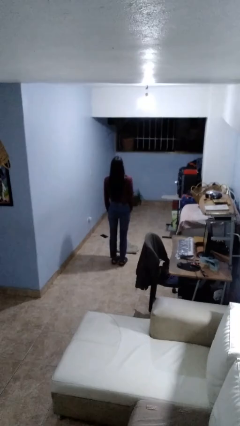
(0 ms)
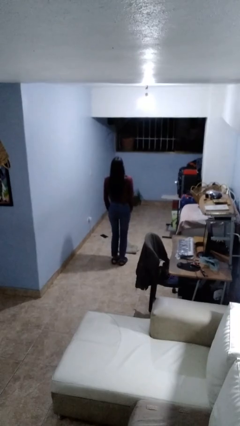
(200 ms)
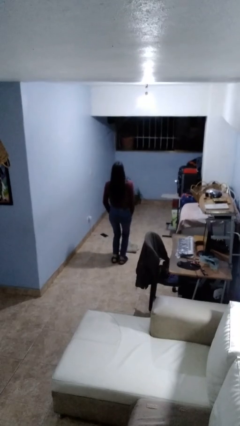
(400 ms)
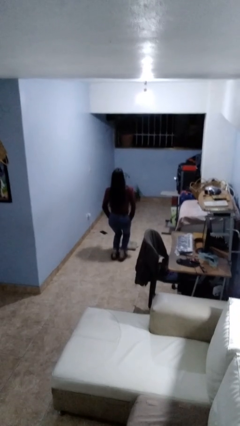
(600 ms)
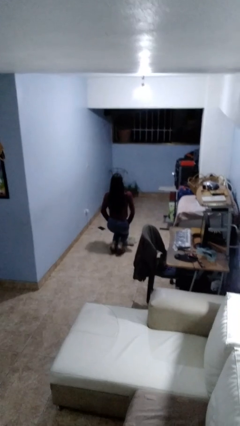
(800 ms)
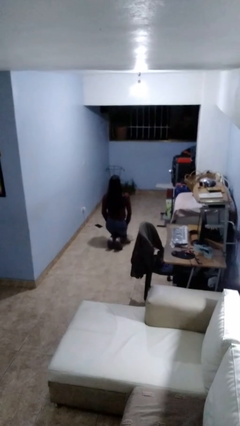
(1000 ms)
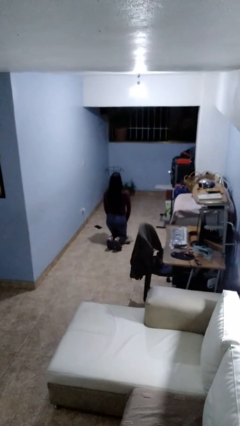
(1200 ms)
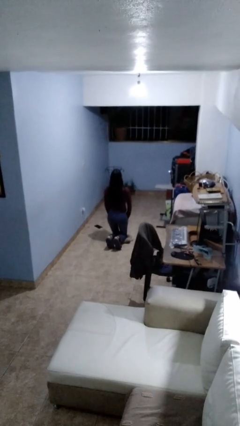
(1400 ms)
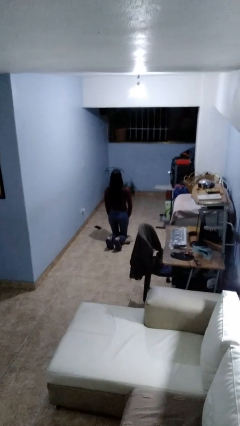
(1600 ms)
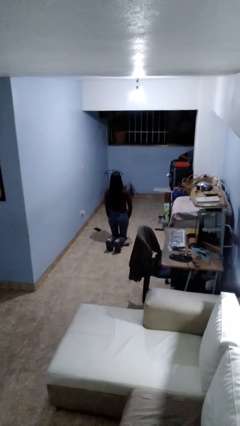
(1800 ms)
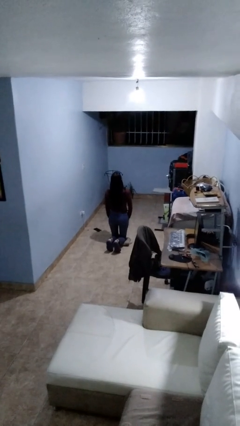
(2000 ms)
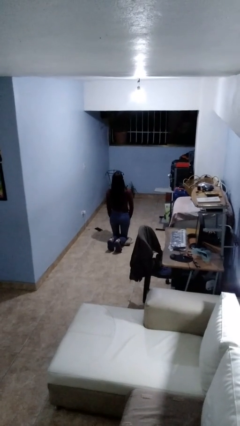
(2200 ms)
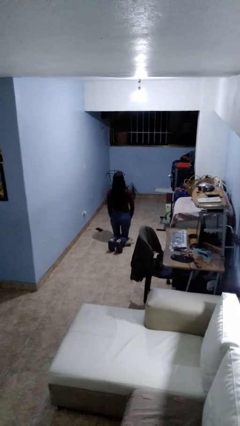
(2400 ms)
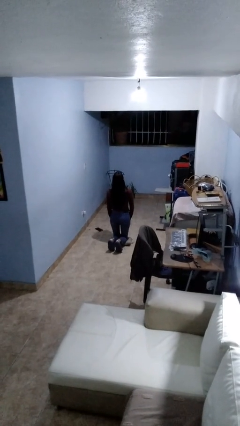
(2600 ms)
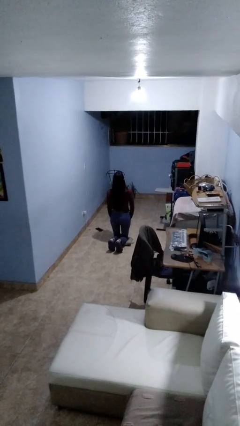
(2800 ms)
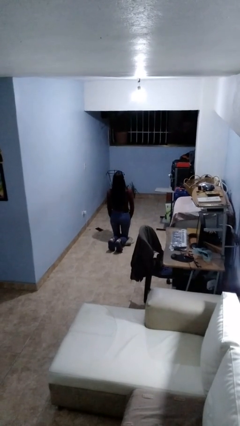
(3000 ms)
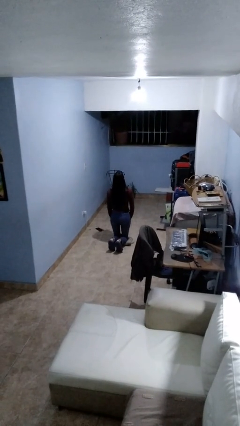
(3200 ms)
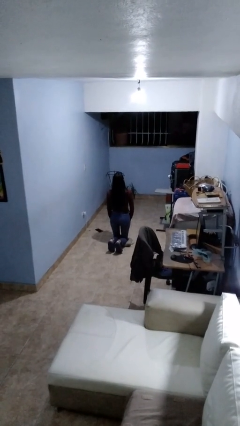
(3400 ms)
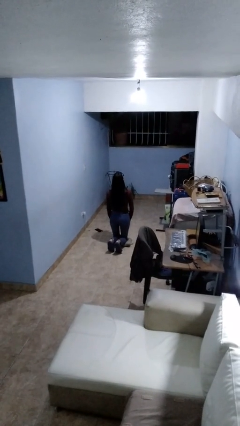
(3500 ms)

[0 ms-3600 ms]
person kneels

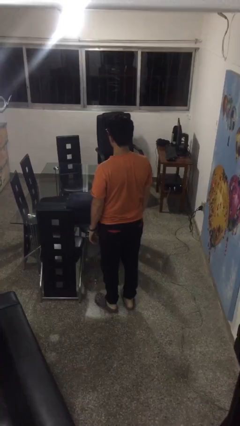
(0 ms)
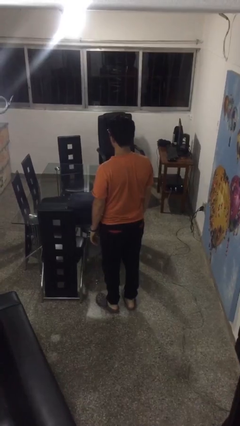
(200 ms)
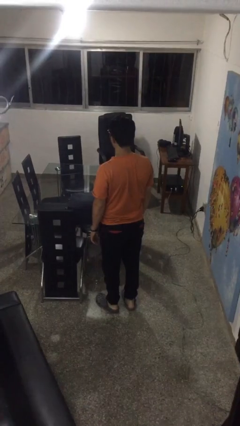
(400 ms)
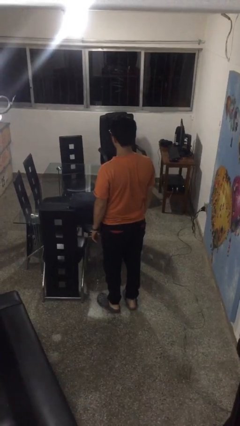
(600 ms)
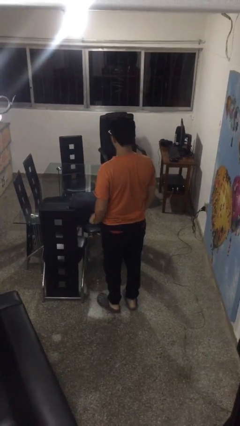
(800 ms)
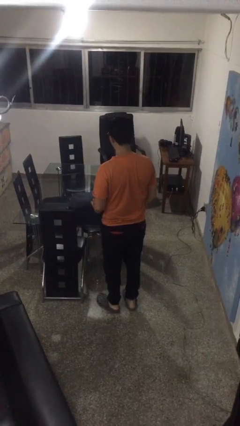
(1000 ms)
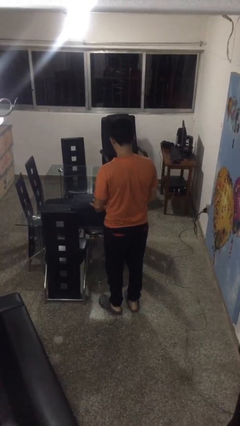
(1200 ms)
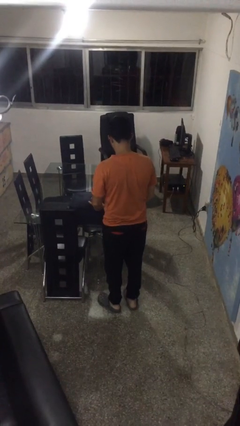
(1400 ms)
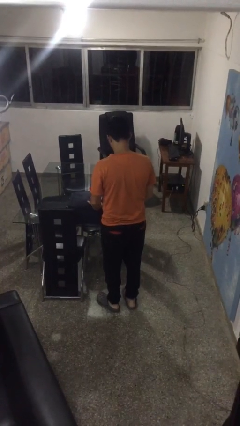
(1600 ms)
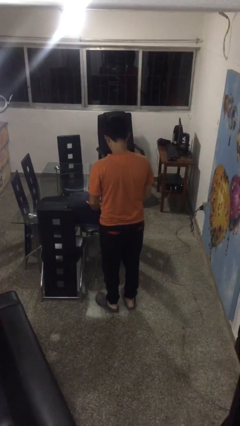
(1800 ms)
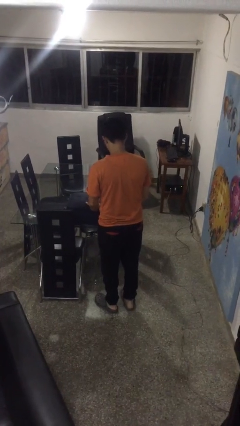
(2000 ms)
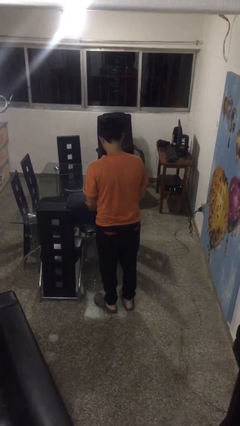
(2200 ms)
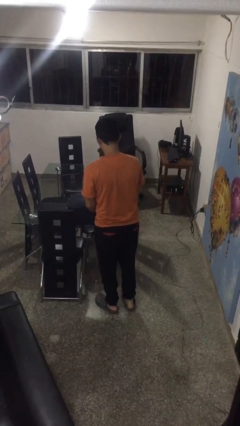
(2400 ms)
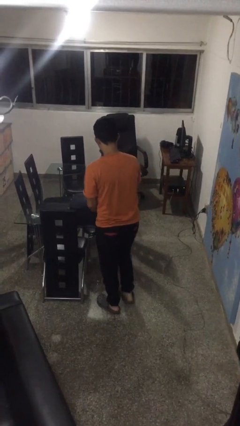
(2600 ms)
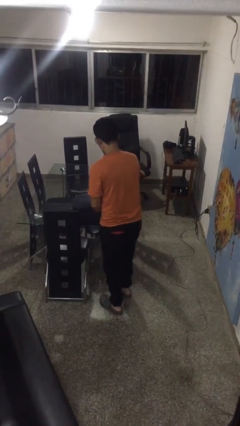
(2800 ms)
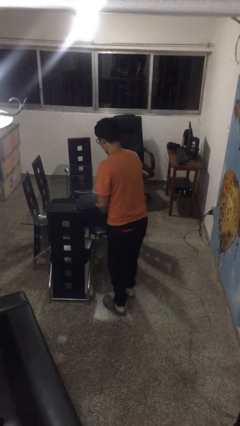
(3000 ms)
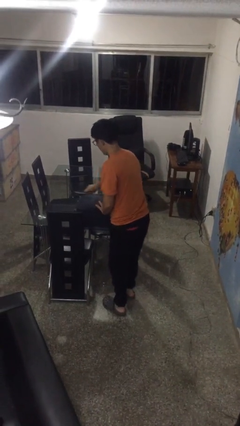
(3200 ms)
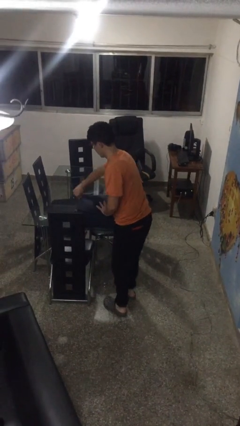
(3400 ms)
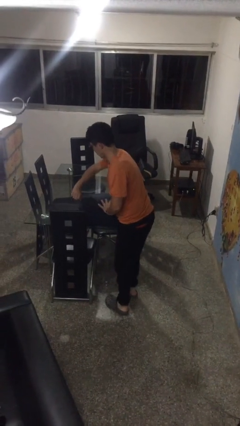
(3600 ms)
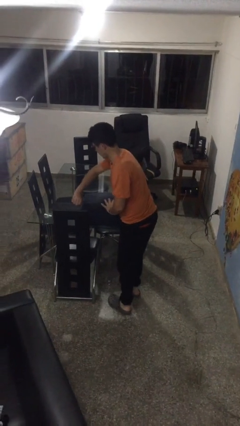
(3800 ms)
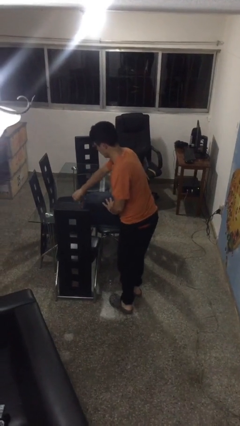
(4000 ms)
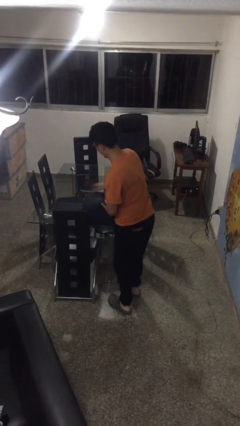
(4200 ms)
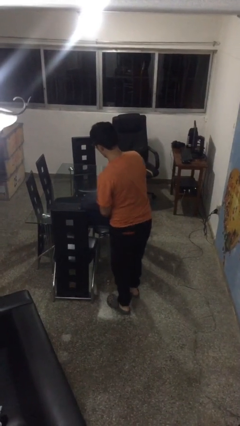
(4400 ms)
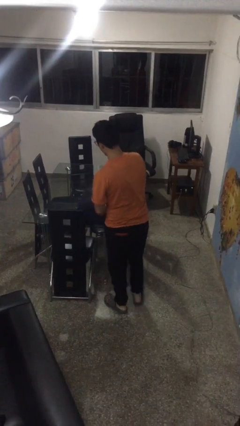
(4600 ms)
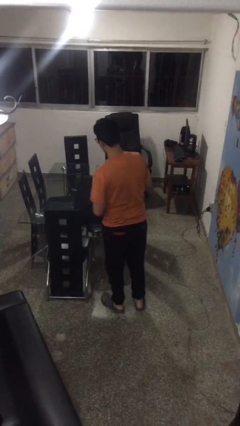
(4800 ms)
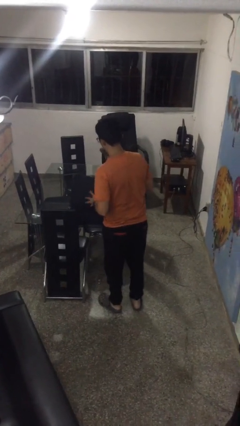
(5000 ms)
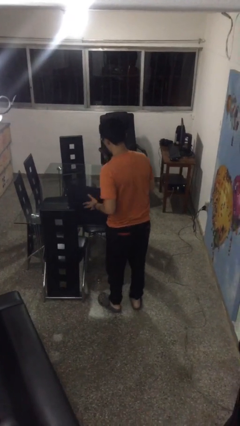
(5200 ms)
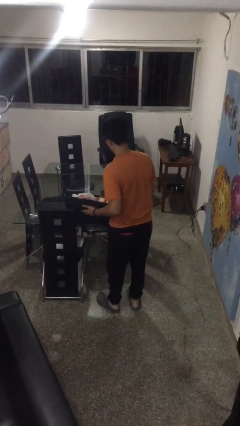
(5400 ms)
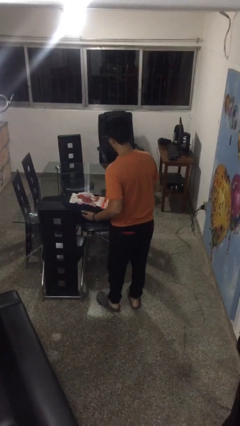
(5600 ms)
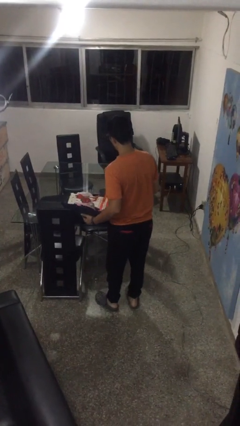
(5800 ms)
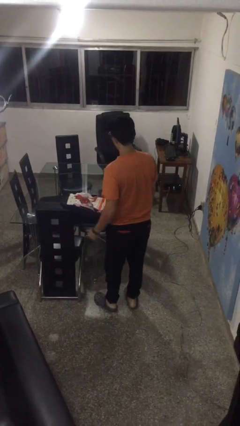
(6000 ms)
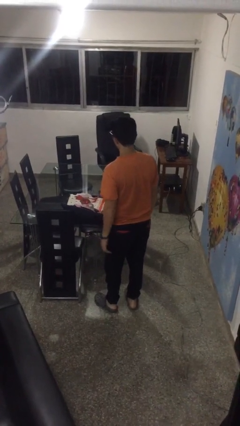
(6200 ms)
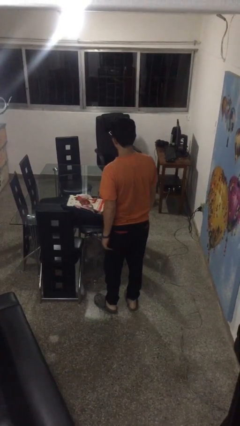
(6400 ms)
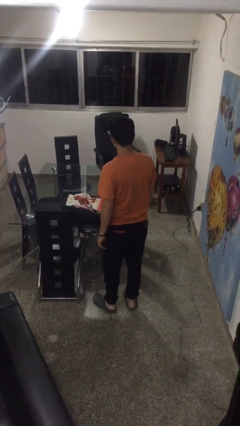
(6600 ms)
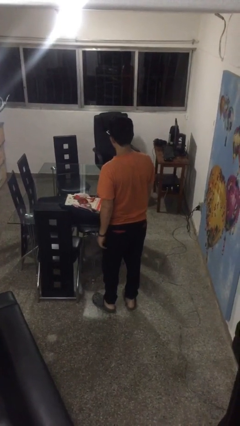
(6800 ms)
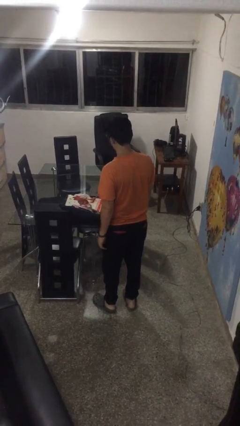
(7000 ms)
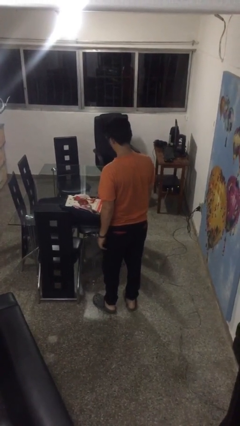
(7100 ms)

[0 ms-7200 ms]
person opens suitcase

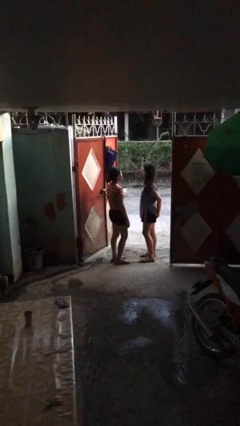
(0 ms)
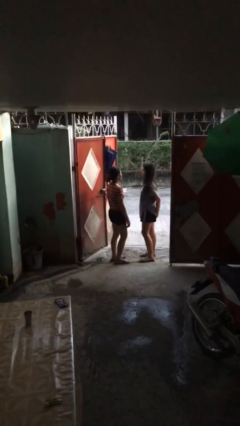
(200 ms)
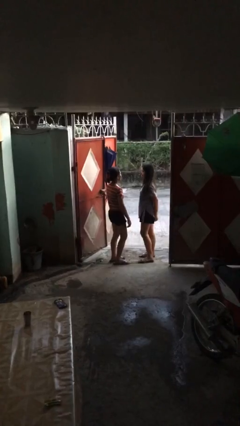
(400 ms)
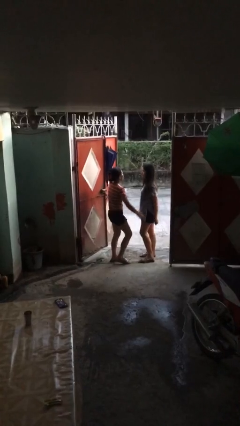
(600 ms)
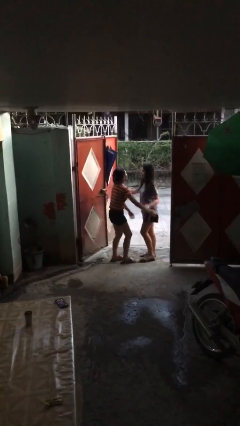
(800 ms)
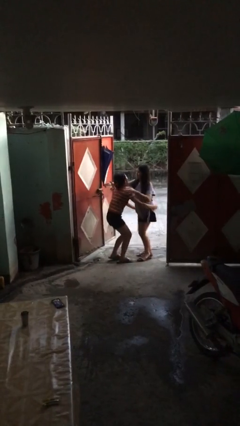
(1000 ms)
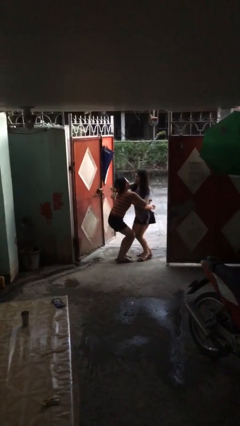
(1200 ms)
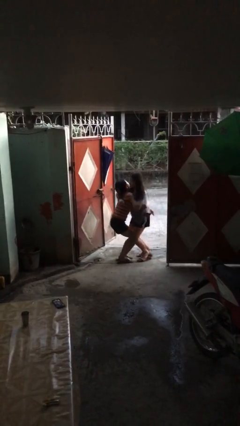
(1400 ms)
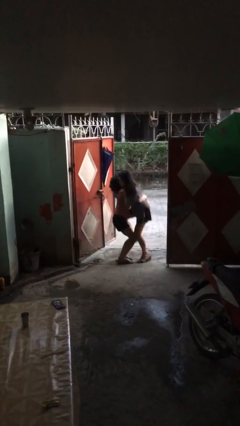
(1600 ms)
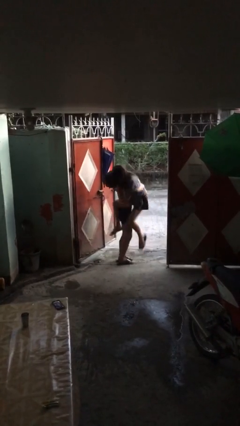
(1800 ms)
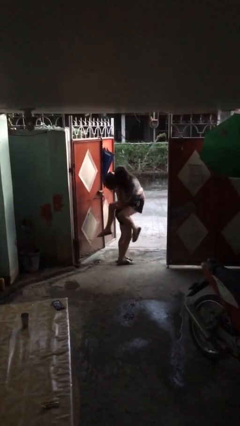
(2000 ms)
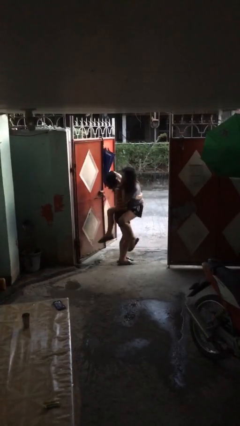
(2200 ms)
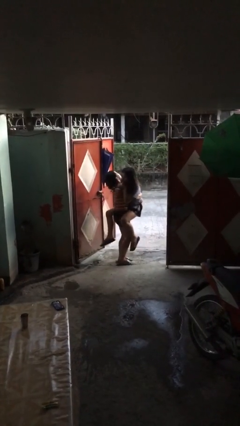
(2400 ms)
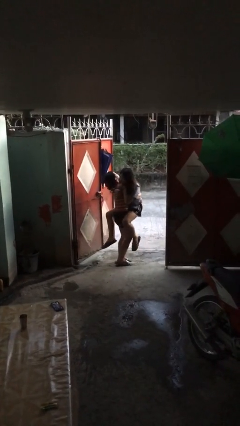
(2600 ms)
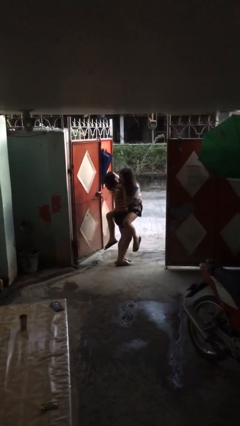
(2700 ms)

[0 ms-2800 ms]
person picks up person

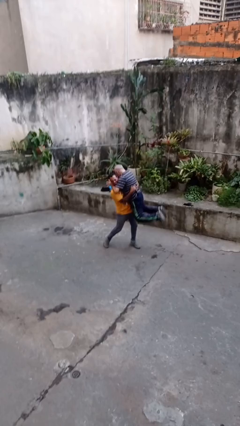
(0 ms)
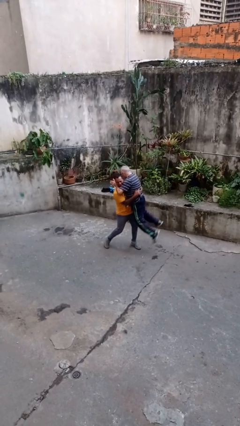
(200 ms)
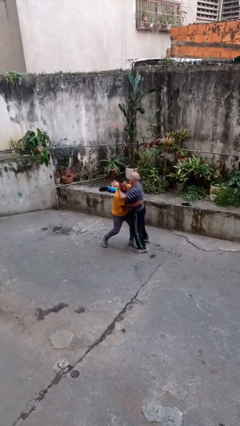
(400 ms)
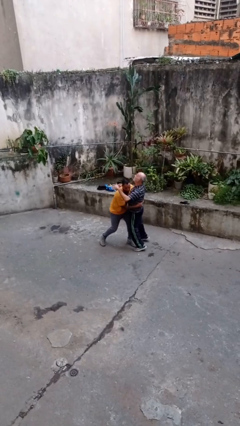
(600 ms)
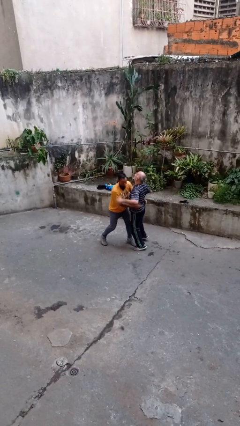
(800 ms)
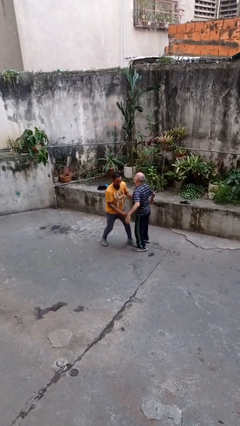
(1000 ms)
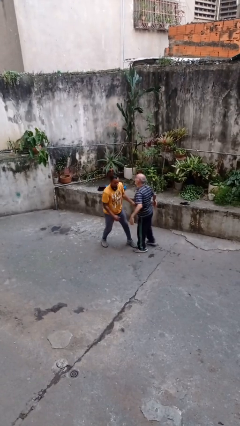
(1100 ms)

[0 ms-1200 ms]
person puts down person

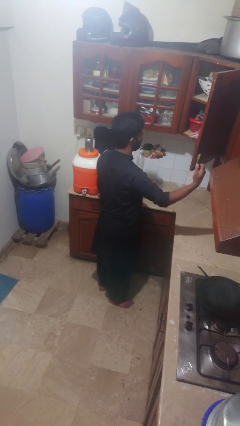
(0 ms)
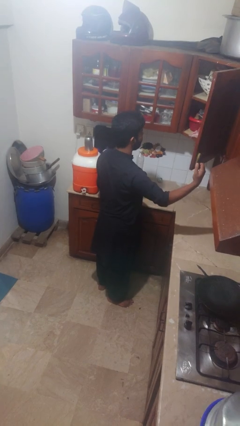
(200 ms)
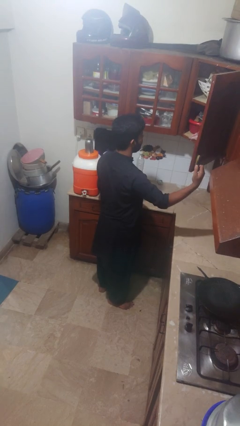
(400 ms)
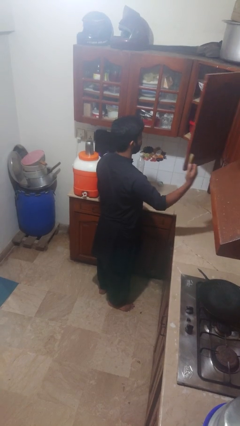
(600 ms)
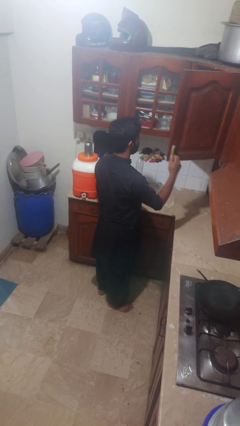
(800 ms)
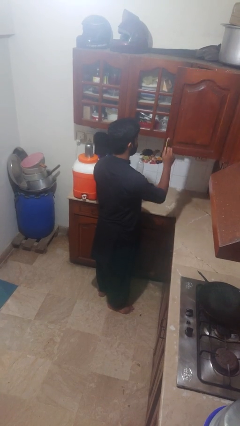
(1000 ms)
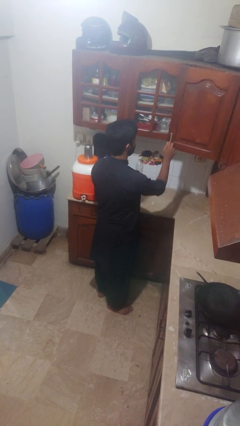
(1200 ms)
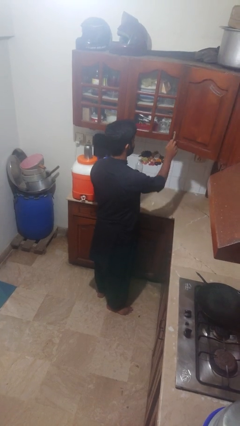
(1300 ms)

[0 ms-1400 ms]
person closes cabinet

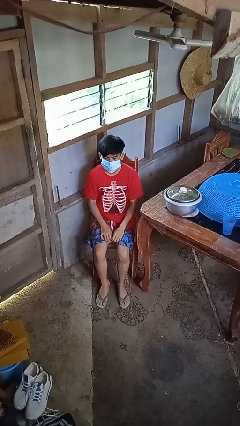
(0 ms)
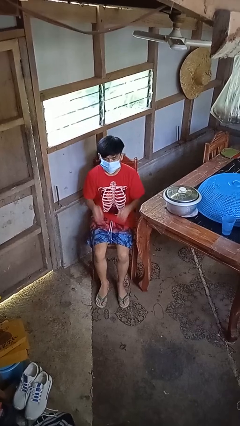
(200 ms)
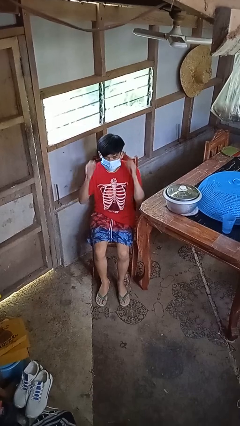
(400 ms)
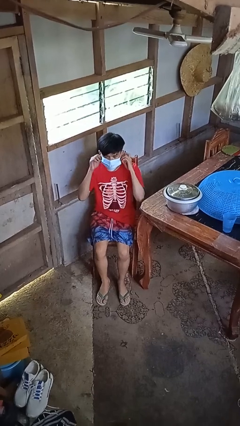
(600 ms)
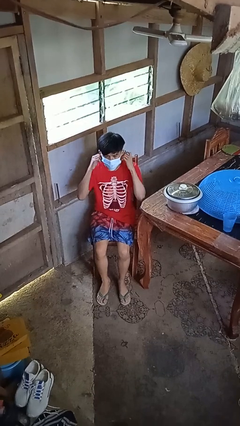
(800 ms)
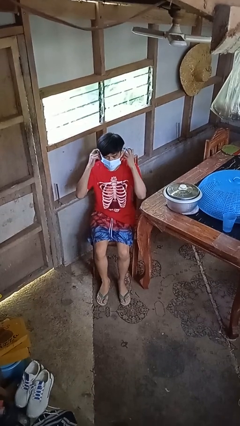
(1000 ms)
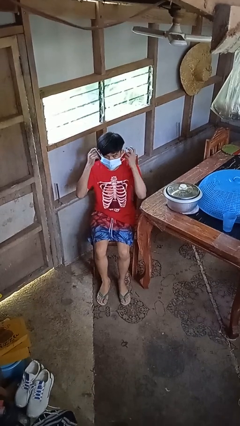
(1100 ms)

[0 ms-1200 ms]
person takes off facemask

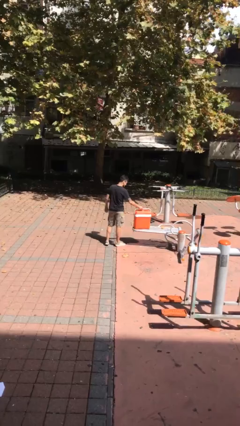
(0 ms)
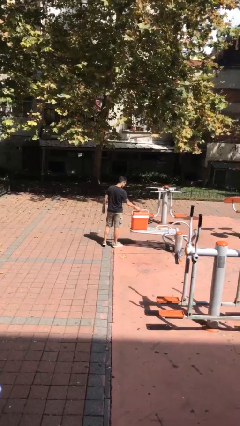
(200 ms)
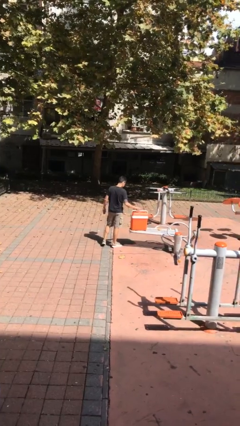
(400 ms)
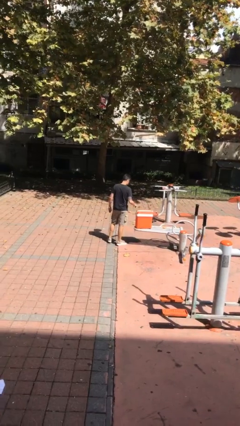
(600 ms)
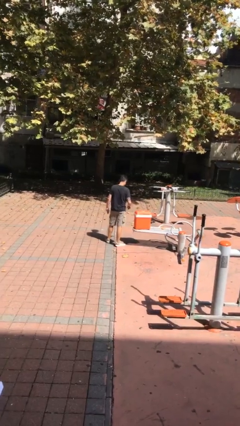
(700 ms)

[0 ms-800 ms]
person puts down object on table
